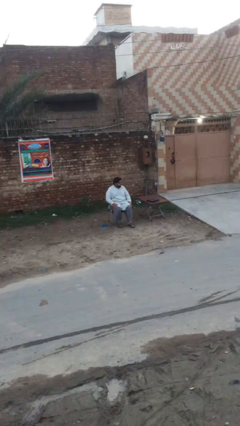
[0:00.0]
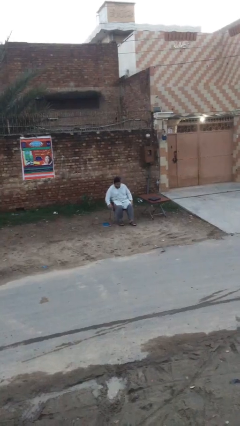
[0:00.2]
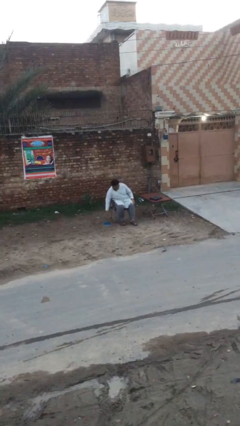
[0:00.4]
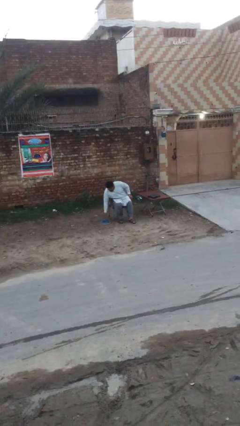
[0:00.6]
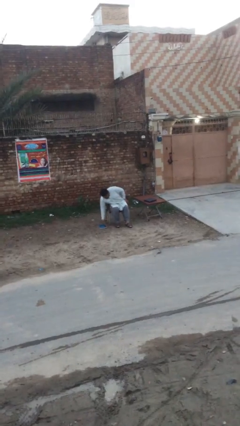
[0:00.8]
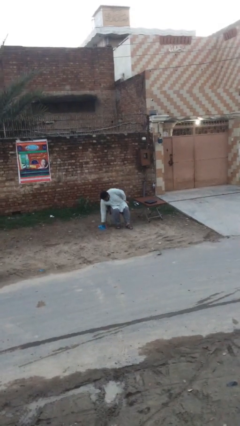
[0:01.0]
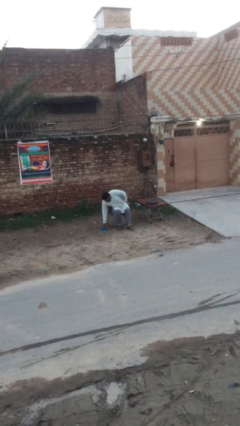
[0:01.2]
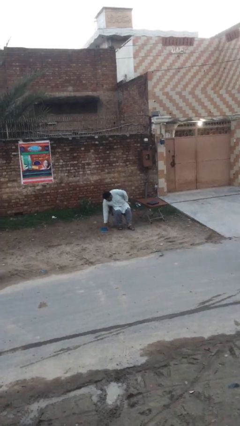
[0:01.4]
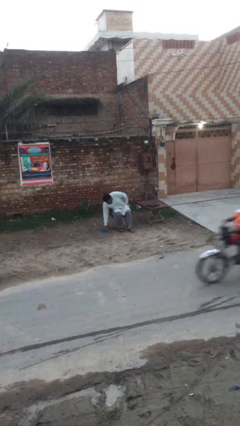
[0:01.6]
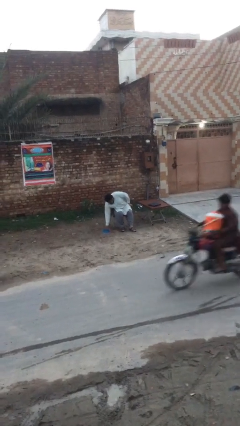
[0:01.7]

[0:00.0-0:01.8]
person picks up object from floor

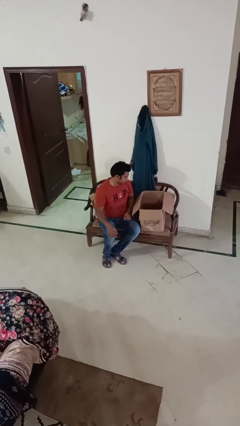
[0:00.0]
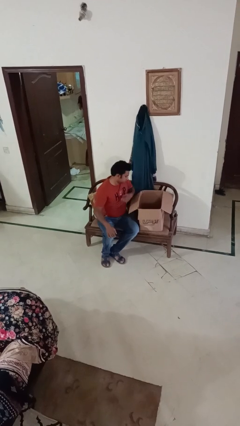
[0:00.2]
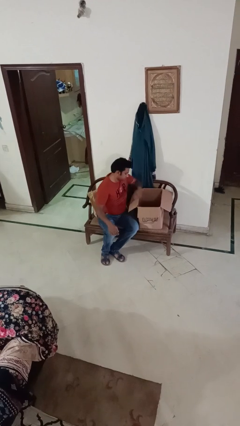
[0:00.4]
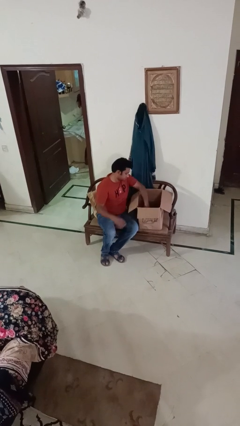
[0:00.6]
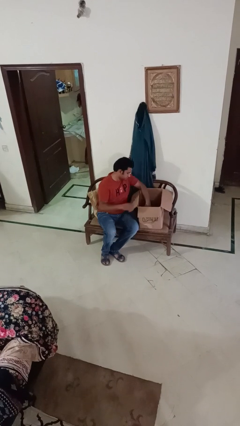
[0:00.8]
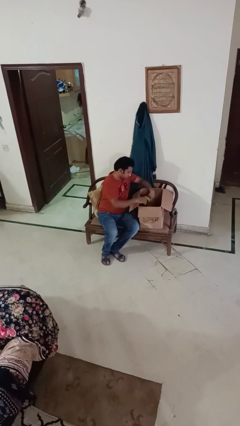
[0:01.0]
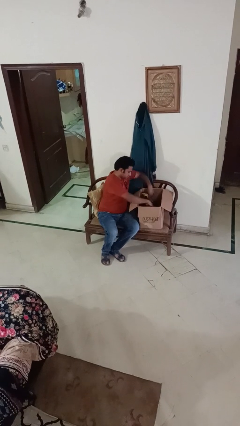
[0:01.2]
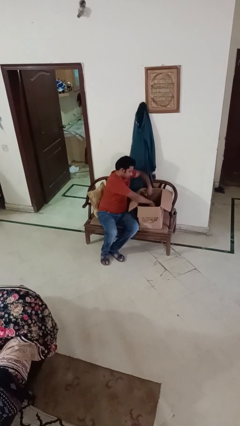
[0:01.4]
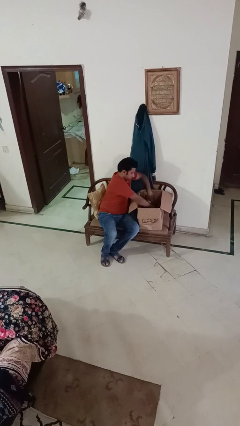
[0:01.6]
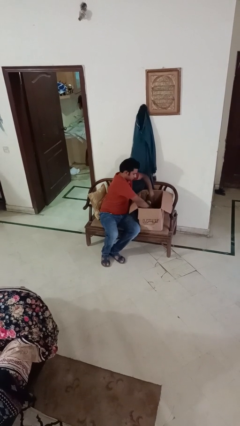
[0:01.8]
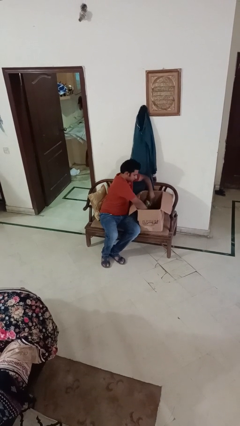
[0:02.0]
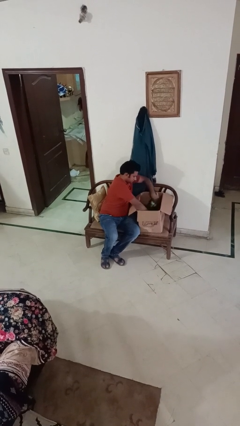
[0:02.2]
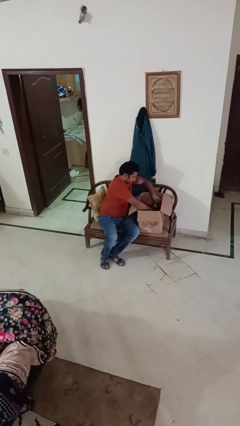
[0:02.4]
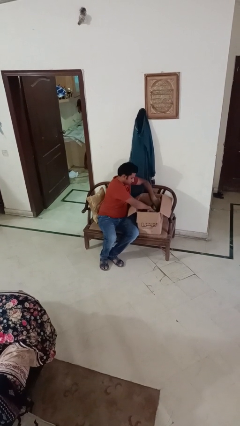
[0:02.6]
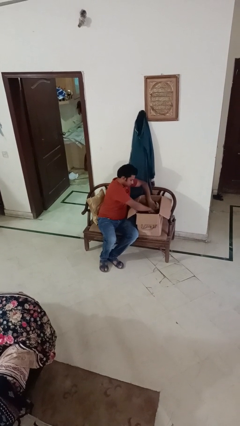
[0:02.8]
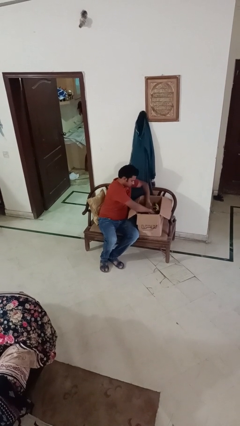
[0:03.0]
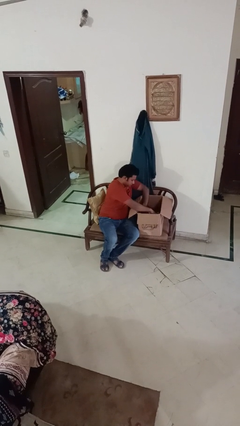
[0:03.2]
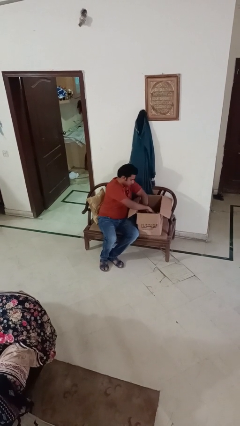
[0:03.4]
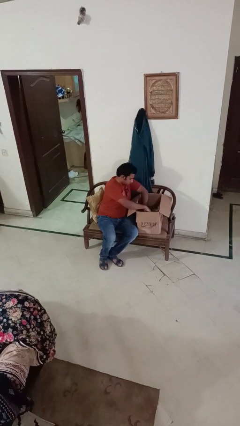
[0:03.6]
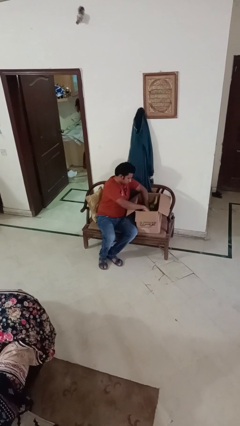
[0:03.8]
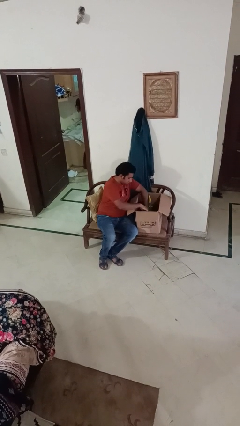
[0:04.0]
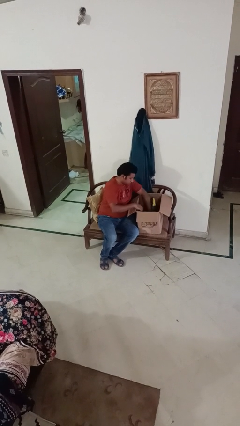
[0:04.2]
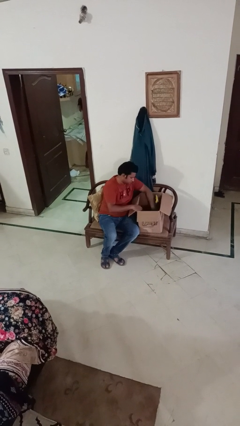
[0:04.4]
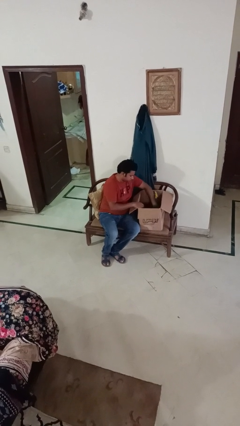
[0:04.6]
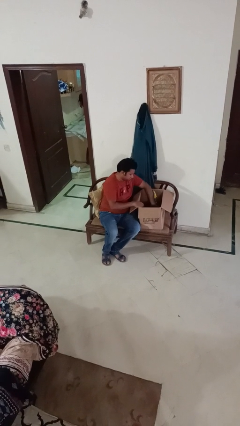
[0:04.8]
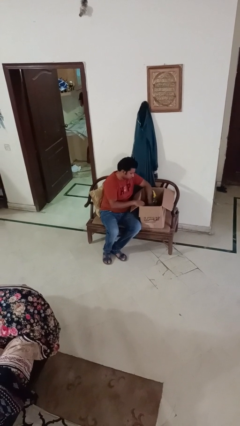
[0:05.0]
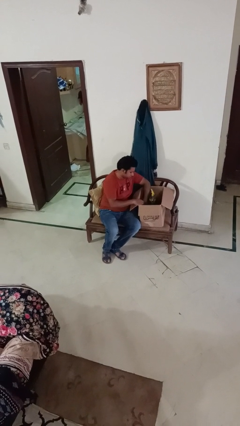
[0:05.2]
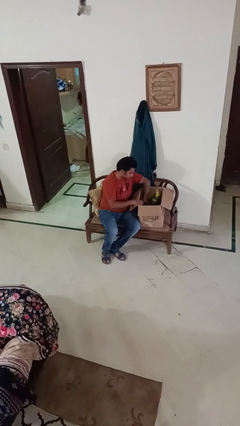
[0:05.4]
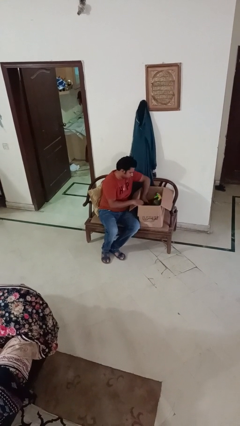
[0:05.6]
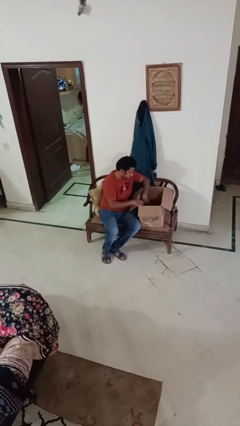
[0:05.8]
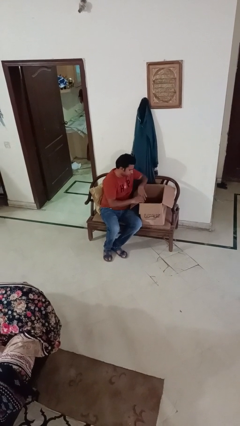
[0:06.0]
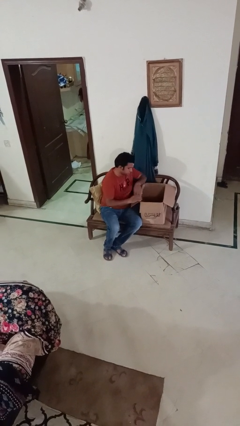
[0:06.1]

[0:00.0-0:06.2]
person searches in box

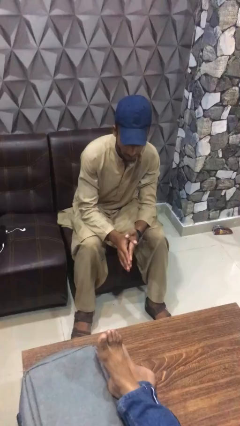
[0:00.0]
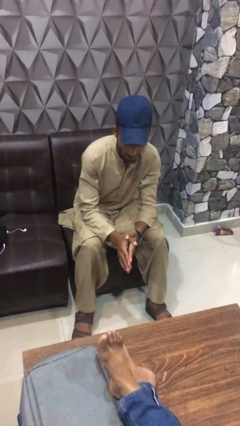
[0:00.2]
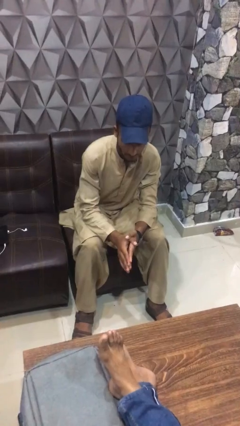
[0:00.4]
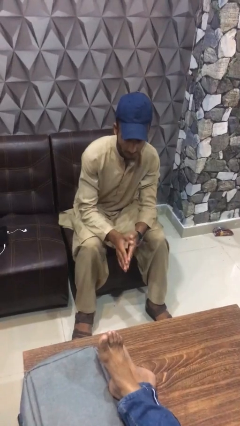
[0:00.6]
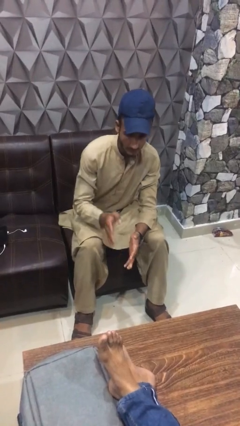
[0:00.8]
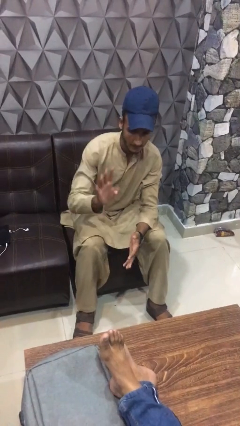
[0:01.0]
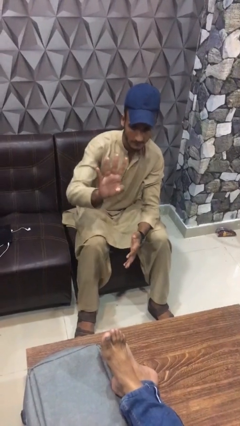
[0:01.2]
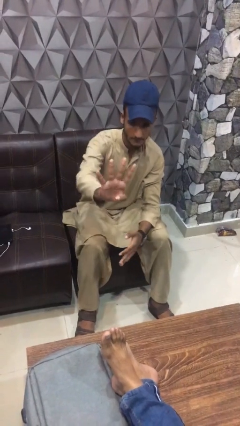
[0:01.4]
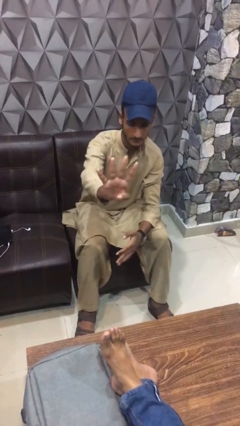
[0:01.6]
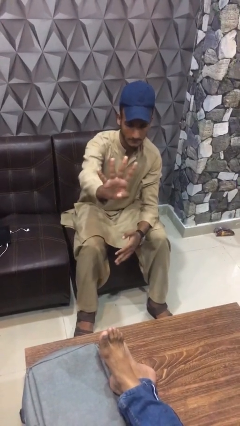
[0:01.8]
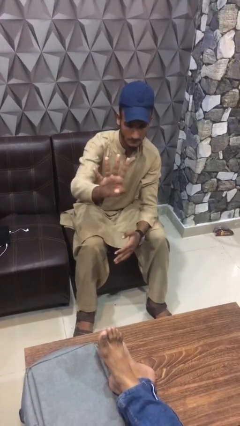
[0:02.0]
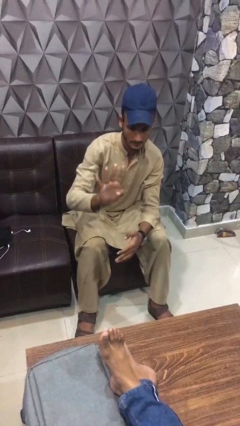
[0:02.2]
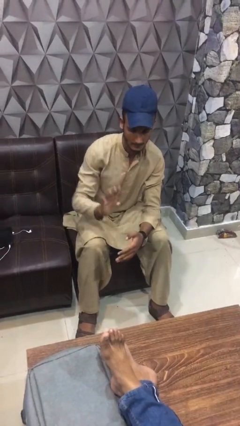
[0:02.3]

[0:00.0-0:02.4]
person gestures number four

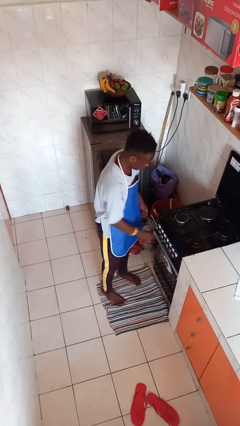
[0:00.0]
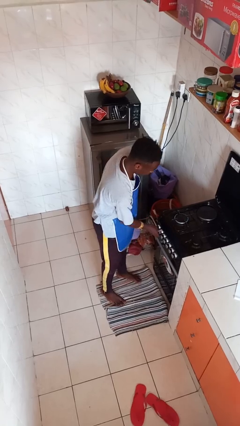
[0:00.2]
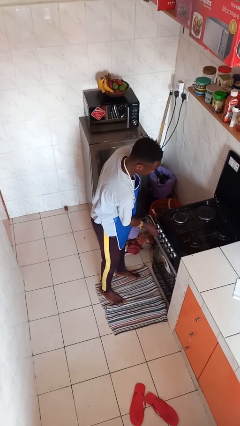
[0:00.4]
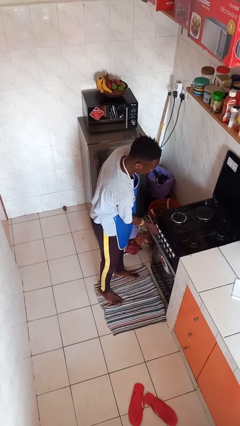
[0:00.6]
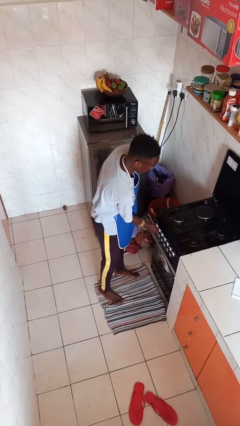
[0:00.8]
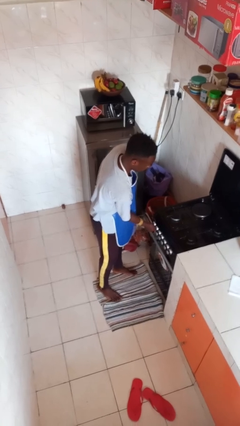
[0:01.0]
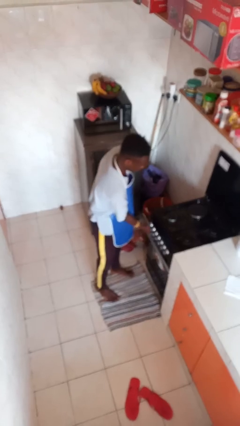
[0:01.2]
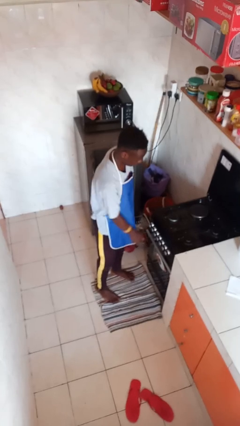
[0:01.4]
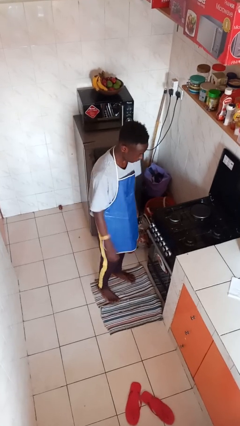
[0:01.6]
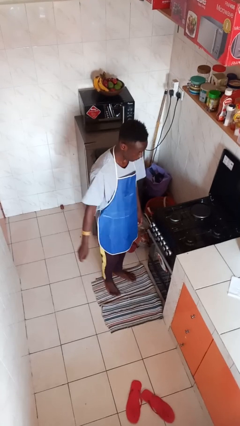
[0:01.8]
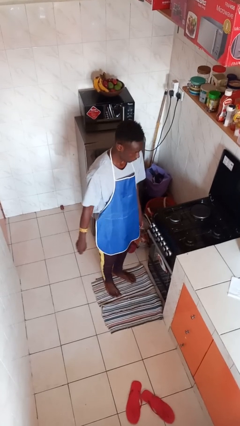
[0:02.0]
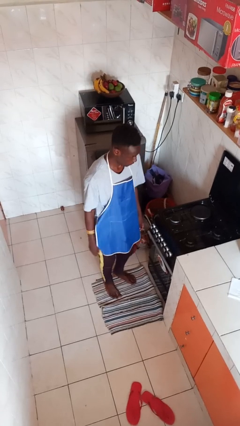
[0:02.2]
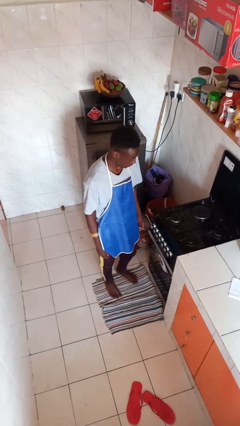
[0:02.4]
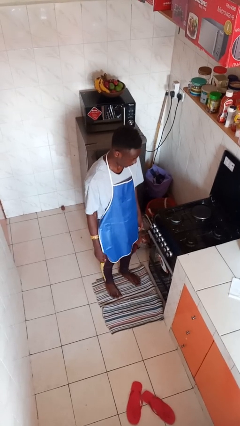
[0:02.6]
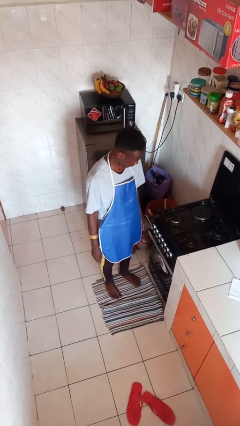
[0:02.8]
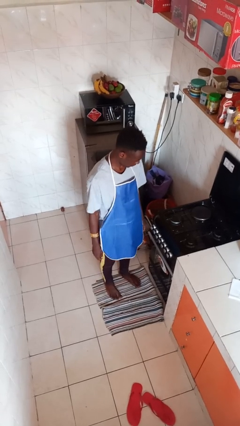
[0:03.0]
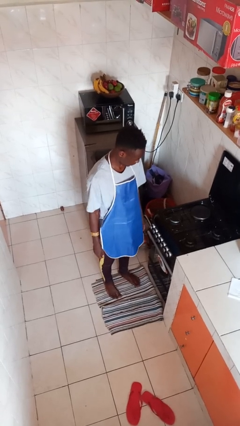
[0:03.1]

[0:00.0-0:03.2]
person turns off stovetop

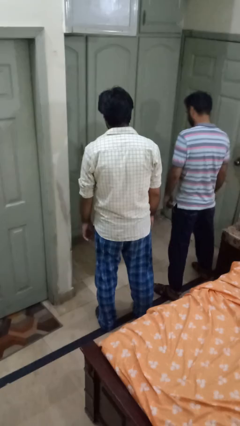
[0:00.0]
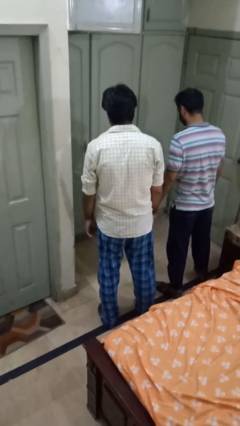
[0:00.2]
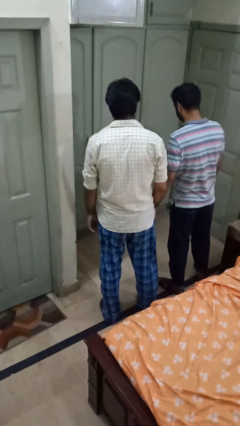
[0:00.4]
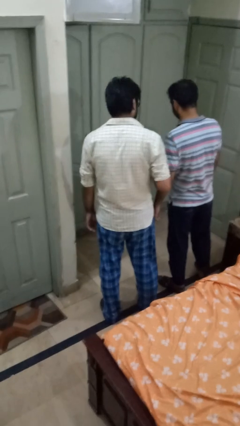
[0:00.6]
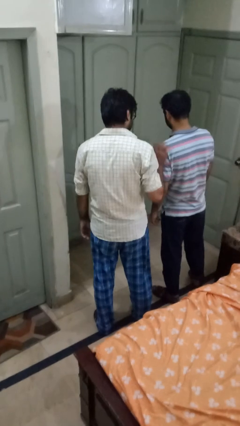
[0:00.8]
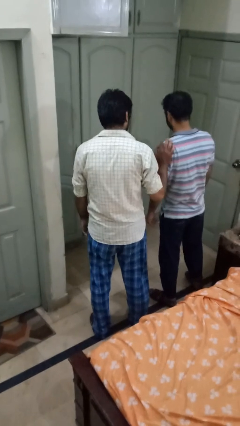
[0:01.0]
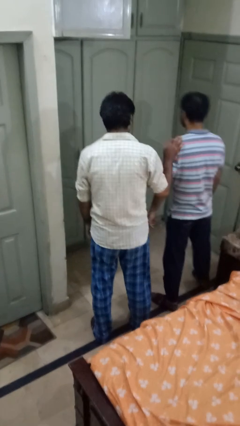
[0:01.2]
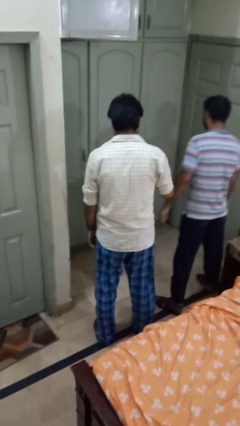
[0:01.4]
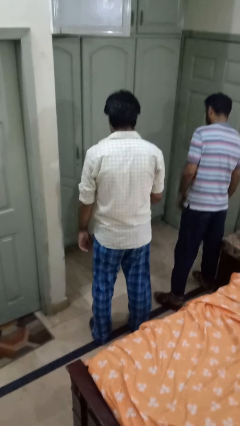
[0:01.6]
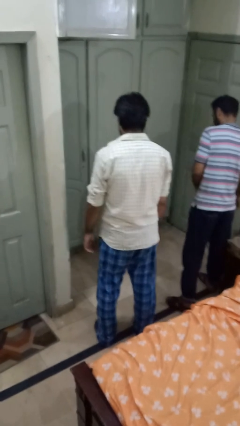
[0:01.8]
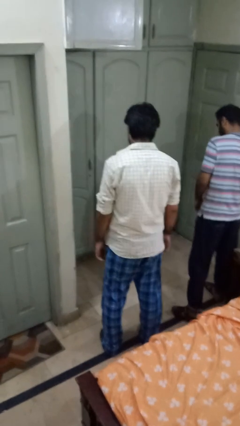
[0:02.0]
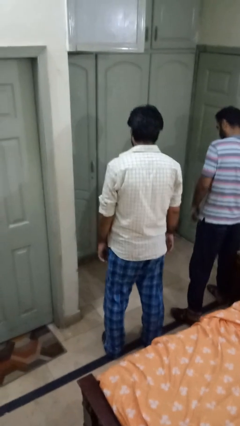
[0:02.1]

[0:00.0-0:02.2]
person shoves person

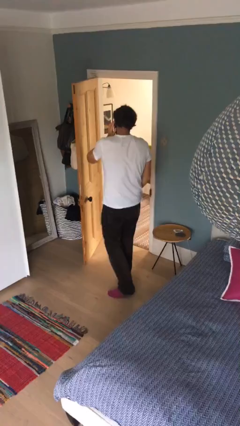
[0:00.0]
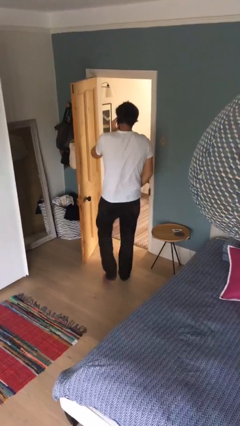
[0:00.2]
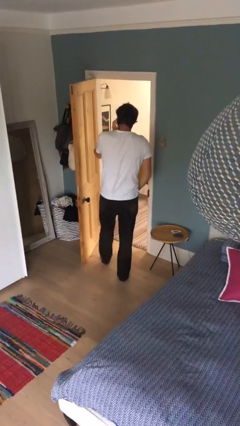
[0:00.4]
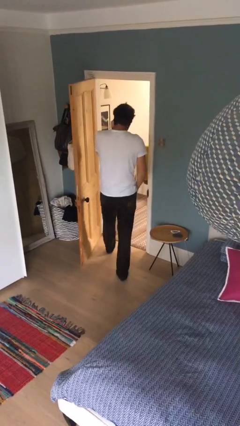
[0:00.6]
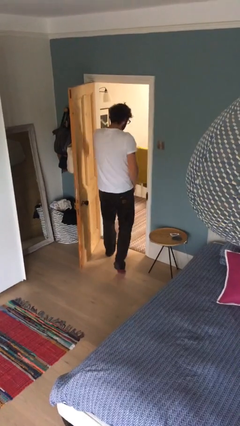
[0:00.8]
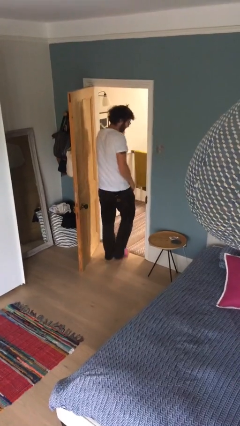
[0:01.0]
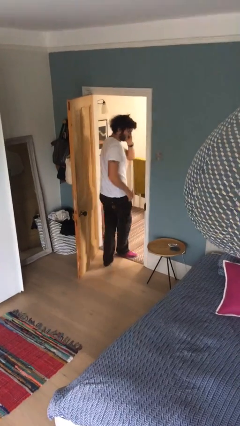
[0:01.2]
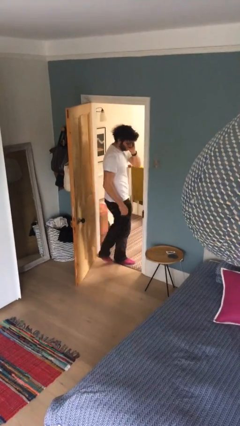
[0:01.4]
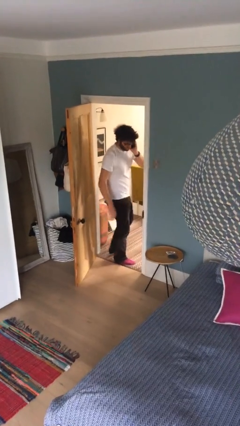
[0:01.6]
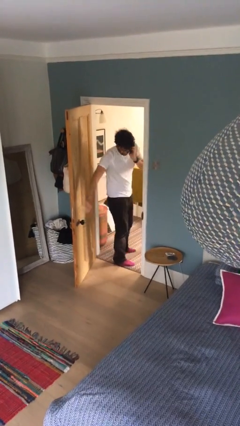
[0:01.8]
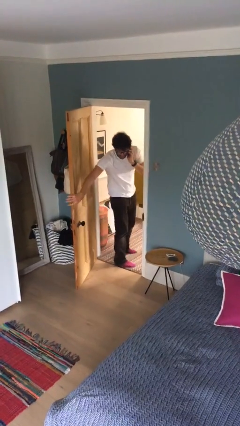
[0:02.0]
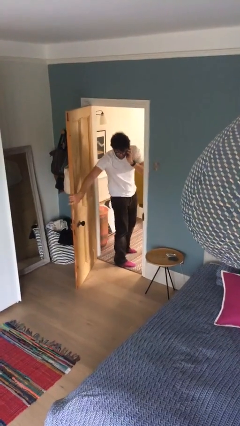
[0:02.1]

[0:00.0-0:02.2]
person exits scene through structure
